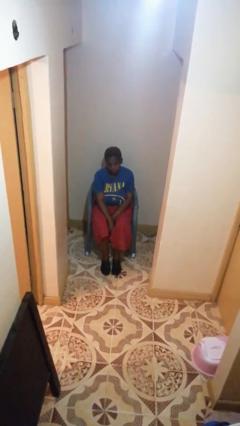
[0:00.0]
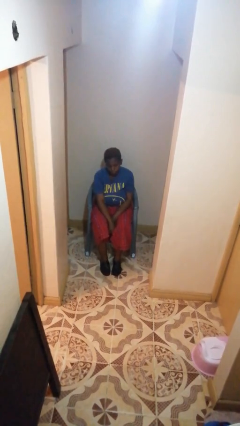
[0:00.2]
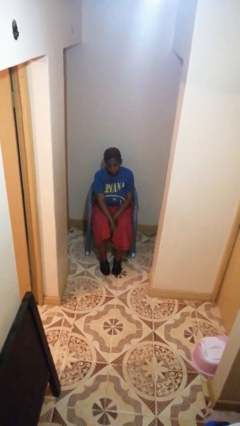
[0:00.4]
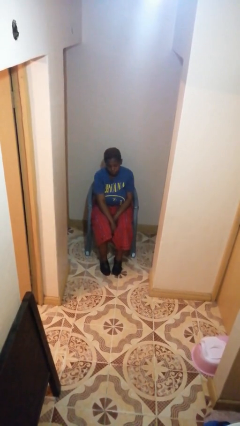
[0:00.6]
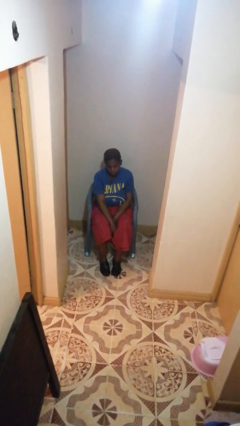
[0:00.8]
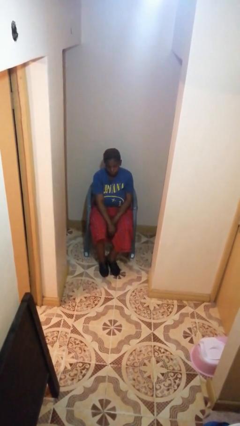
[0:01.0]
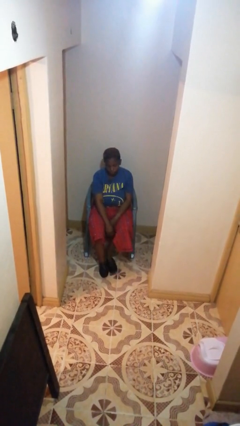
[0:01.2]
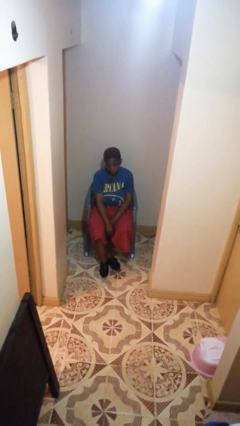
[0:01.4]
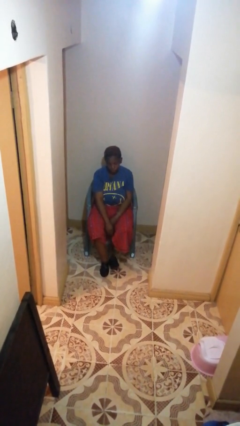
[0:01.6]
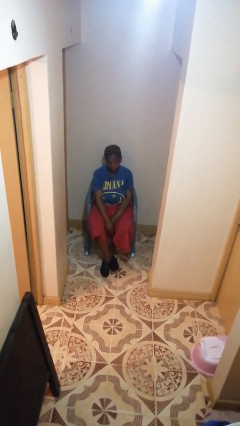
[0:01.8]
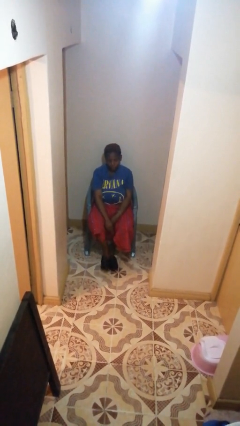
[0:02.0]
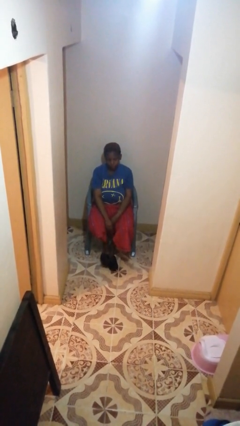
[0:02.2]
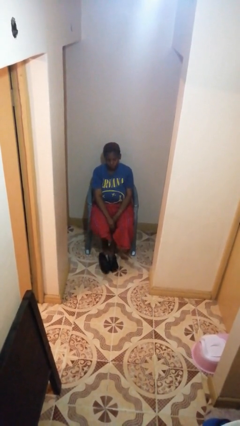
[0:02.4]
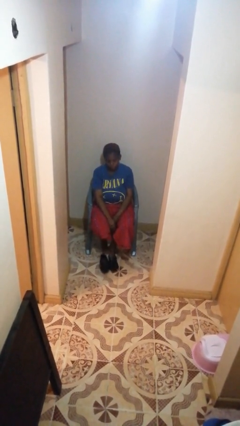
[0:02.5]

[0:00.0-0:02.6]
person takes off shoes

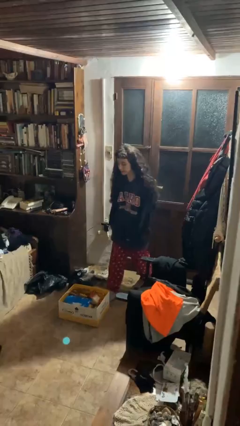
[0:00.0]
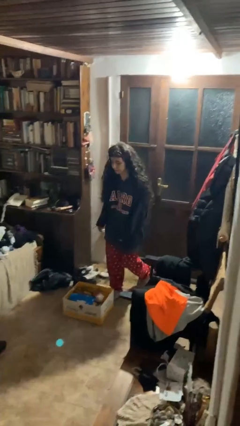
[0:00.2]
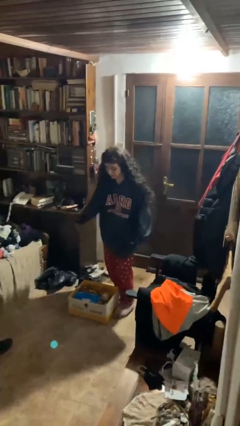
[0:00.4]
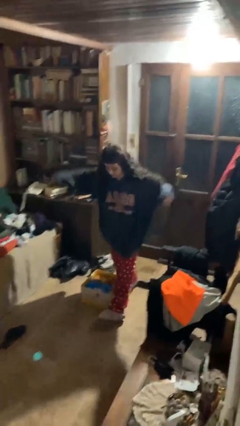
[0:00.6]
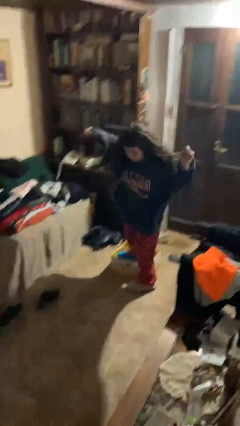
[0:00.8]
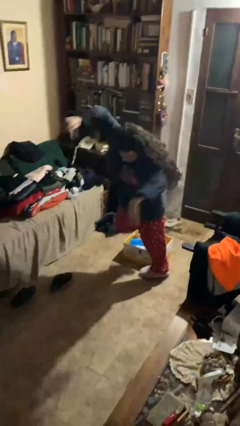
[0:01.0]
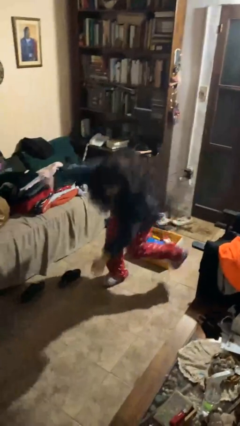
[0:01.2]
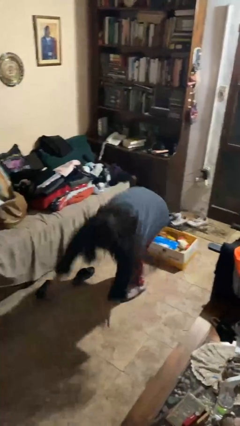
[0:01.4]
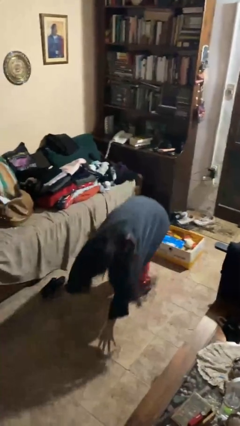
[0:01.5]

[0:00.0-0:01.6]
person trips on object on floor

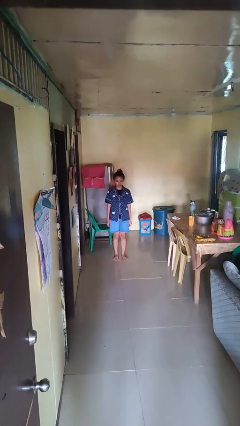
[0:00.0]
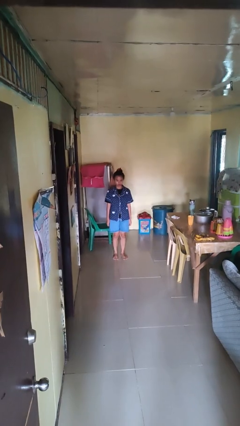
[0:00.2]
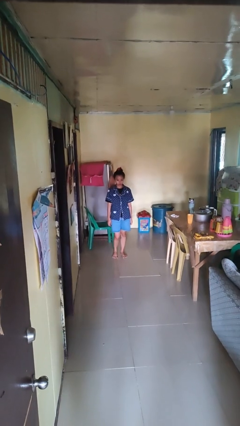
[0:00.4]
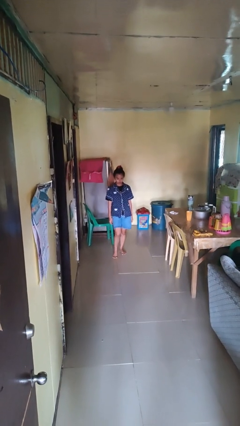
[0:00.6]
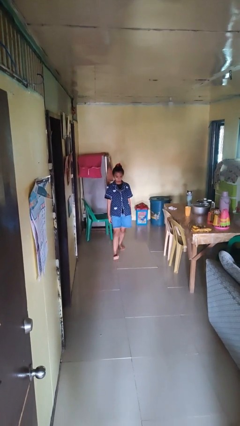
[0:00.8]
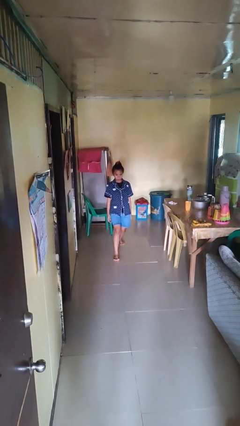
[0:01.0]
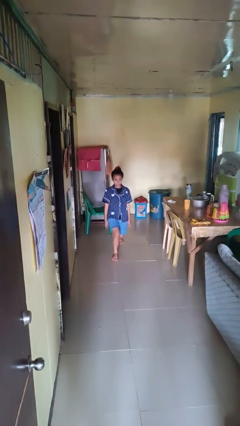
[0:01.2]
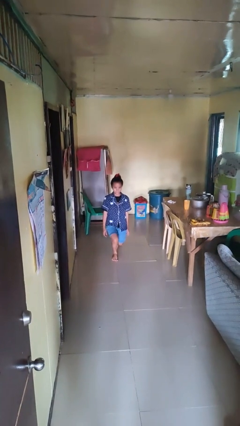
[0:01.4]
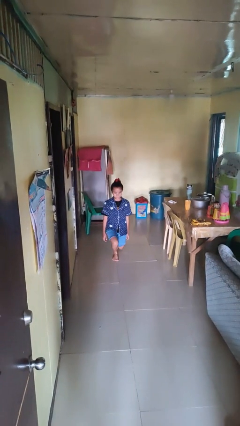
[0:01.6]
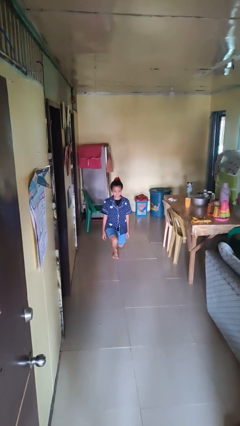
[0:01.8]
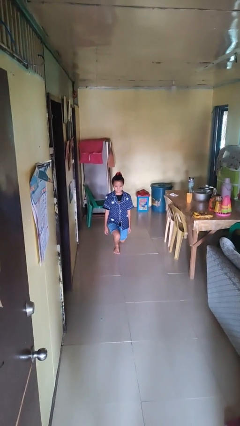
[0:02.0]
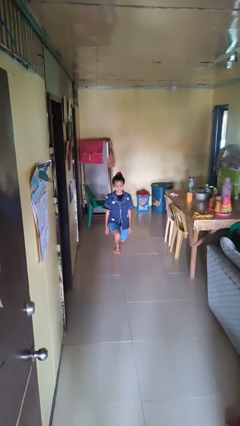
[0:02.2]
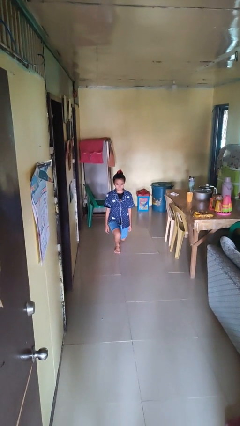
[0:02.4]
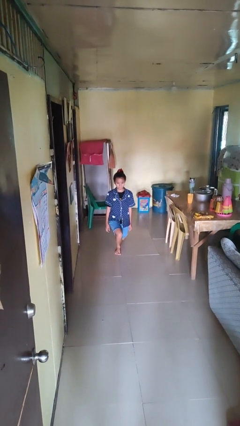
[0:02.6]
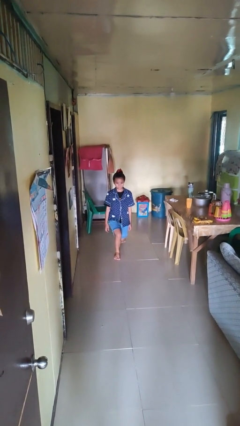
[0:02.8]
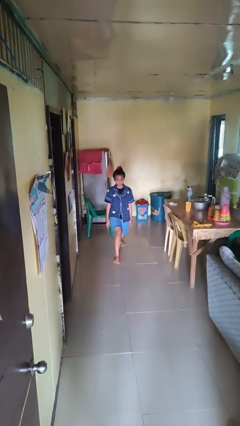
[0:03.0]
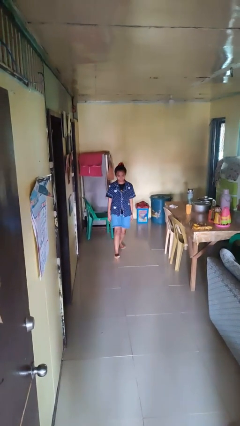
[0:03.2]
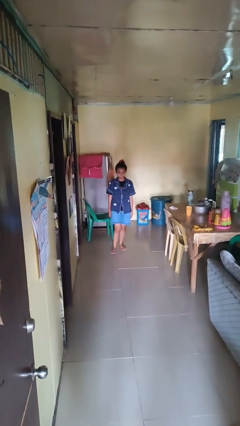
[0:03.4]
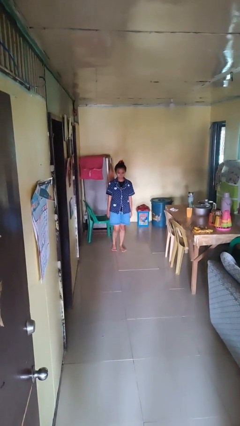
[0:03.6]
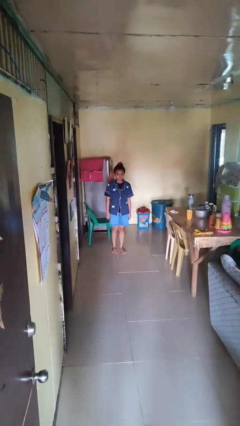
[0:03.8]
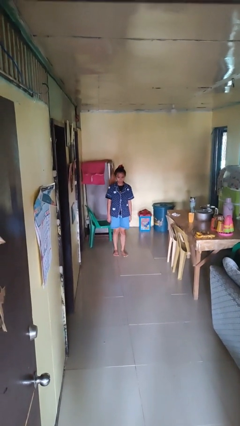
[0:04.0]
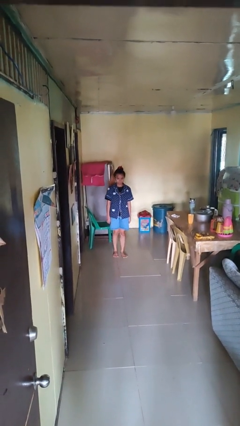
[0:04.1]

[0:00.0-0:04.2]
person exercises with lunges

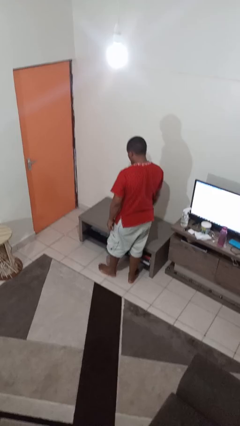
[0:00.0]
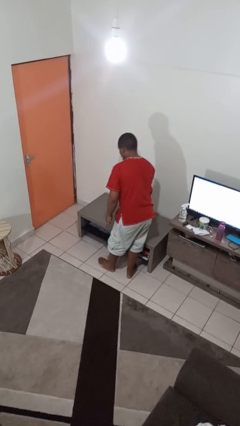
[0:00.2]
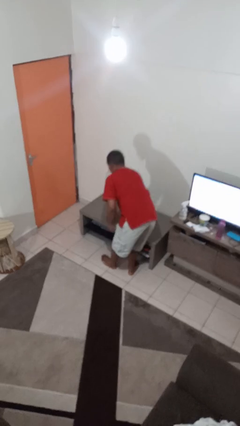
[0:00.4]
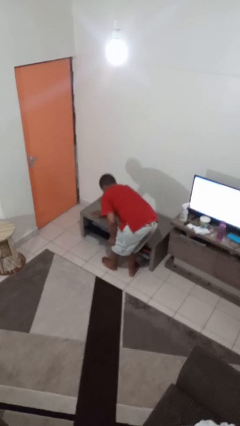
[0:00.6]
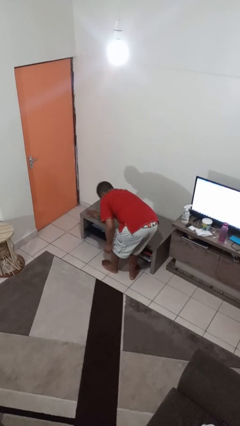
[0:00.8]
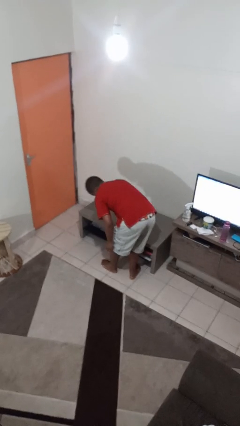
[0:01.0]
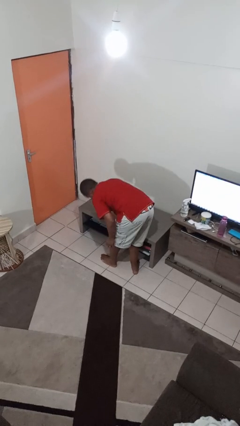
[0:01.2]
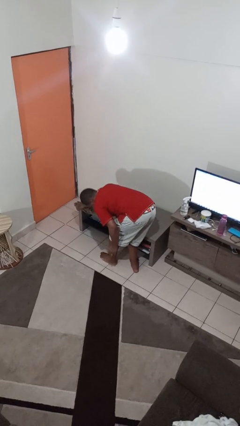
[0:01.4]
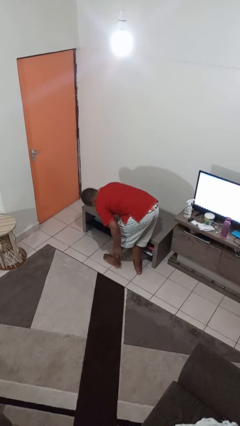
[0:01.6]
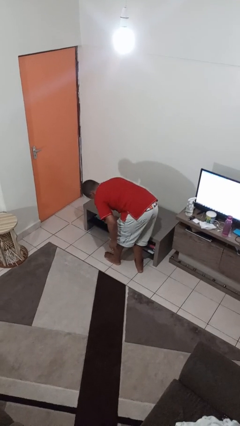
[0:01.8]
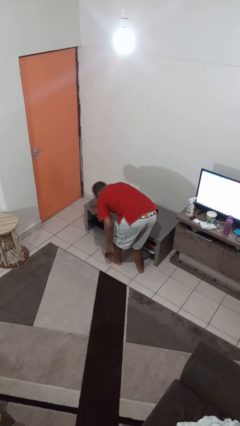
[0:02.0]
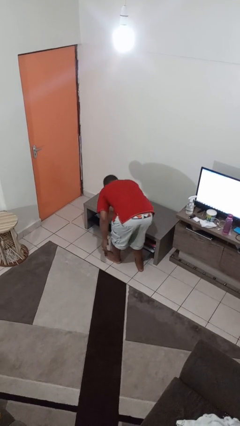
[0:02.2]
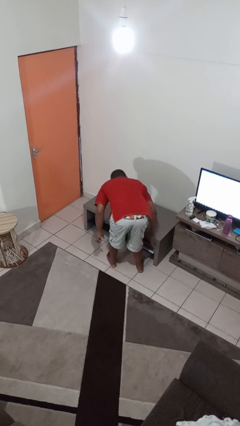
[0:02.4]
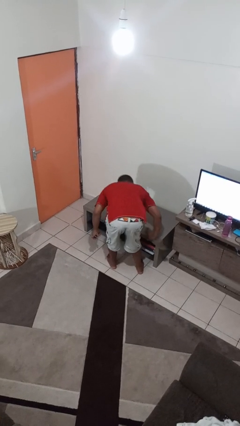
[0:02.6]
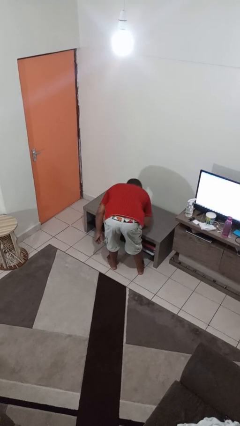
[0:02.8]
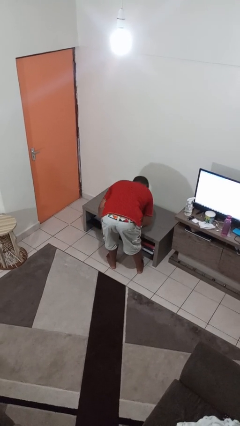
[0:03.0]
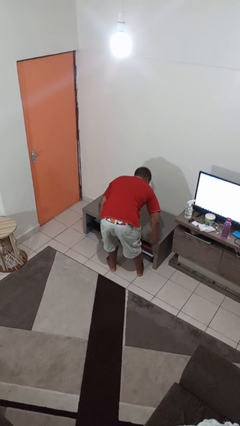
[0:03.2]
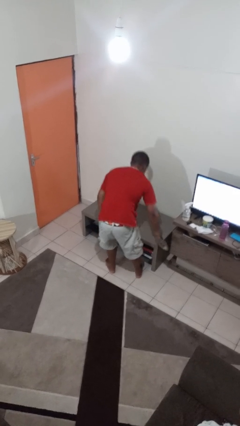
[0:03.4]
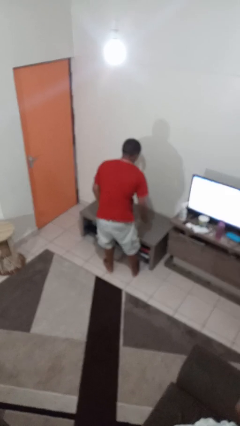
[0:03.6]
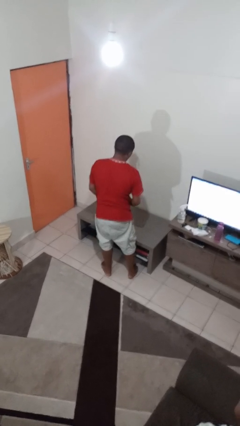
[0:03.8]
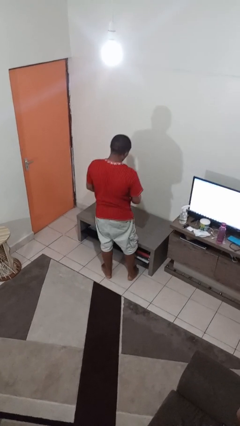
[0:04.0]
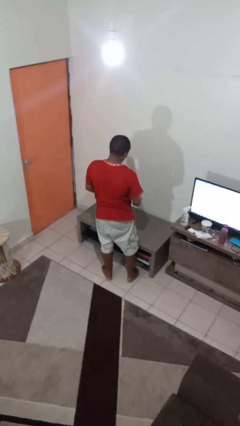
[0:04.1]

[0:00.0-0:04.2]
person cleans table with rag

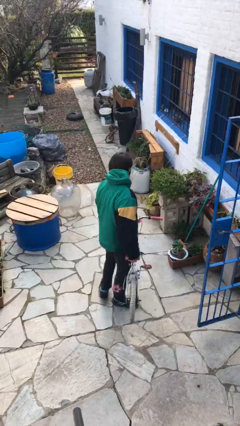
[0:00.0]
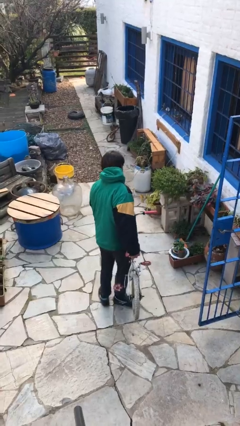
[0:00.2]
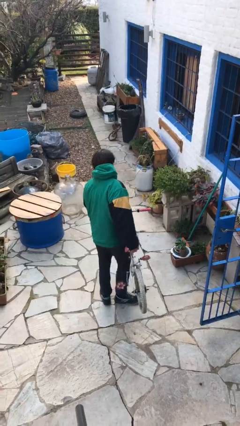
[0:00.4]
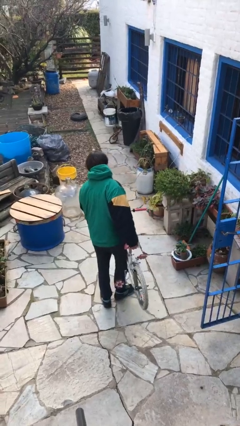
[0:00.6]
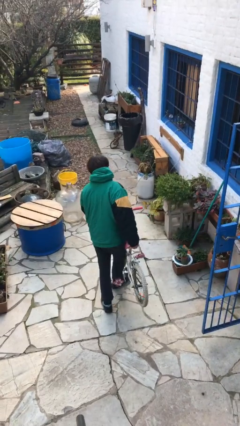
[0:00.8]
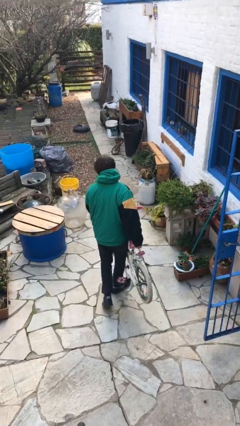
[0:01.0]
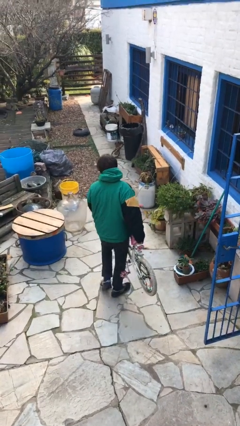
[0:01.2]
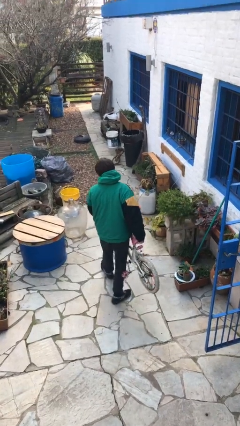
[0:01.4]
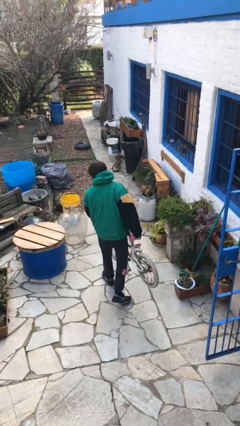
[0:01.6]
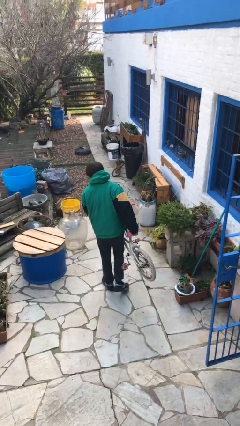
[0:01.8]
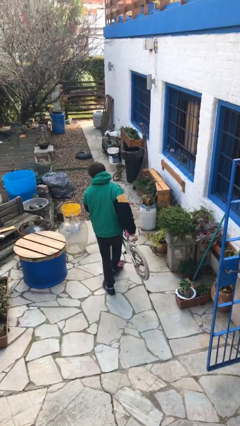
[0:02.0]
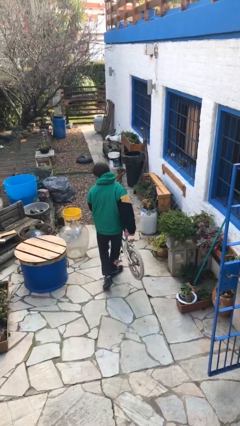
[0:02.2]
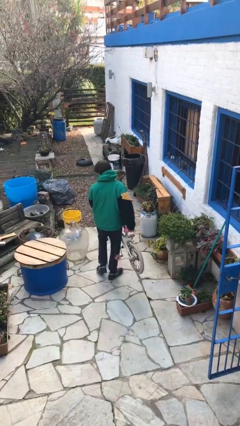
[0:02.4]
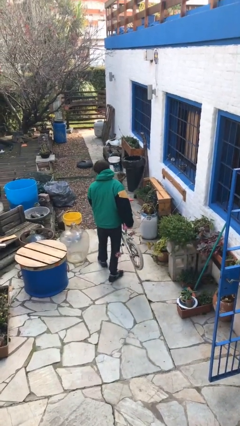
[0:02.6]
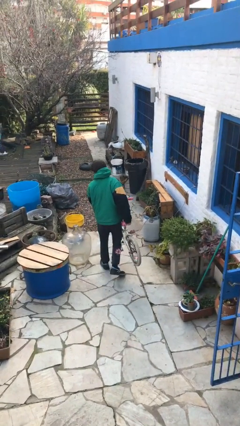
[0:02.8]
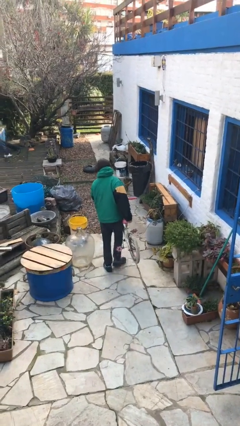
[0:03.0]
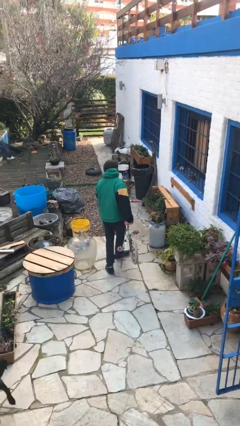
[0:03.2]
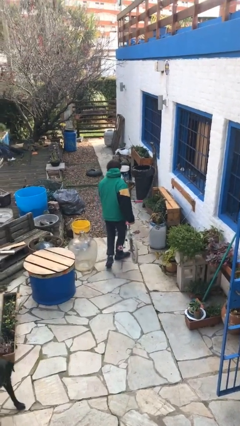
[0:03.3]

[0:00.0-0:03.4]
person carries bicycle

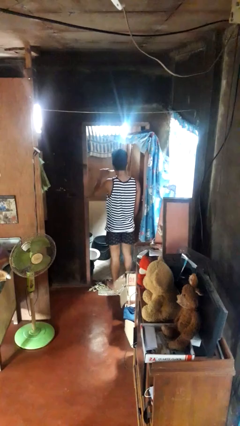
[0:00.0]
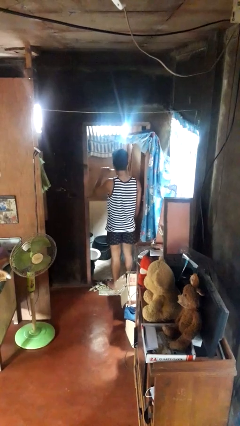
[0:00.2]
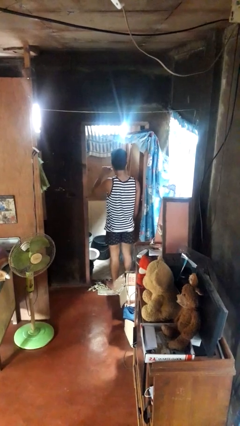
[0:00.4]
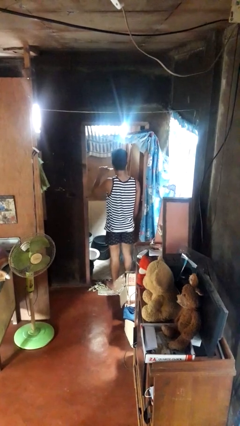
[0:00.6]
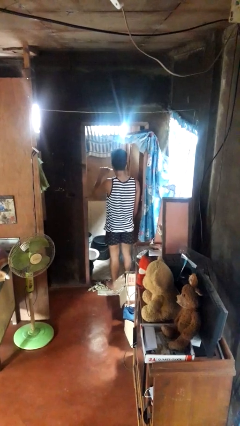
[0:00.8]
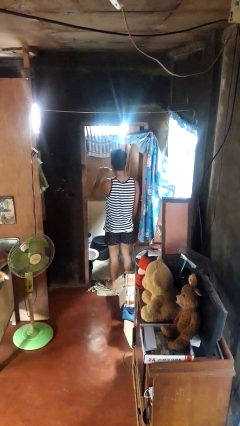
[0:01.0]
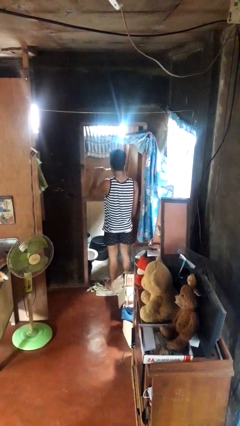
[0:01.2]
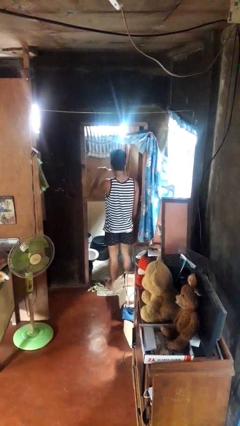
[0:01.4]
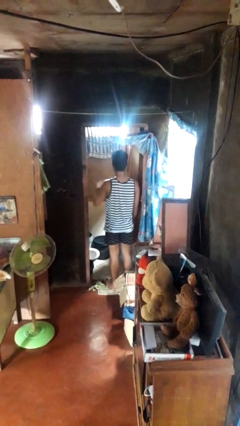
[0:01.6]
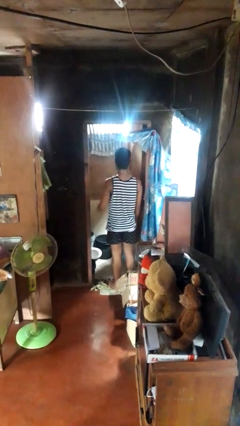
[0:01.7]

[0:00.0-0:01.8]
person brushes teeth
